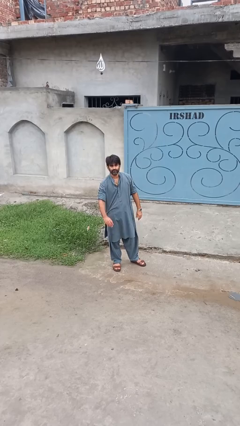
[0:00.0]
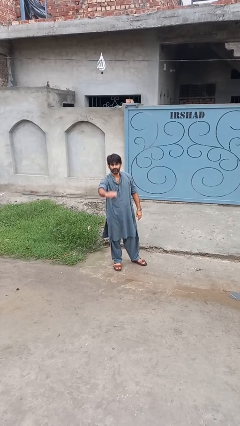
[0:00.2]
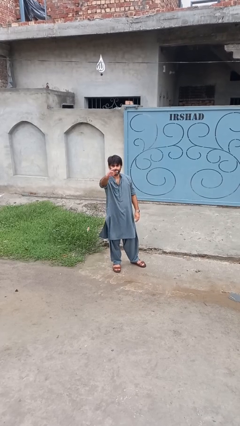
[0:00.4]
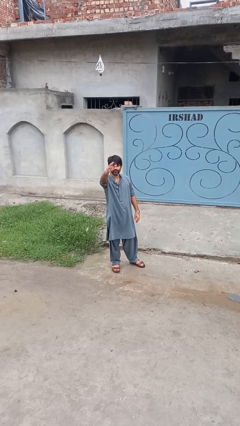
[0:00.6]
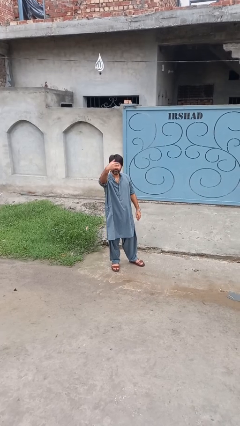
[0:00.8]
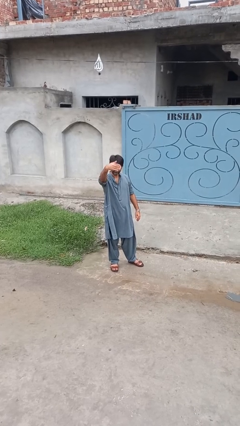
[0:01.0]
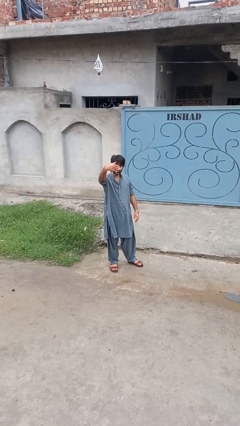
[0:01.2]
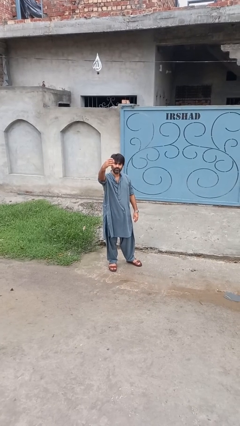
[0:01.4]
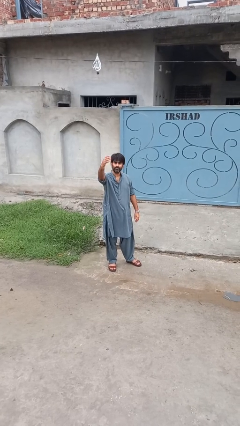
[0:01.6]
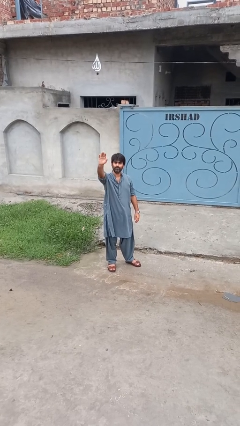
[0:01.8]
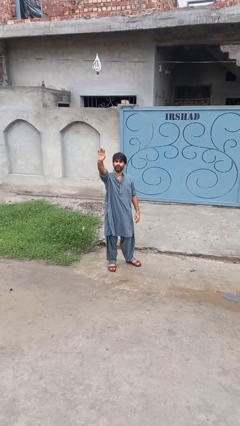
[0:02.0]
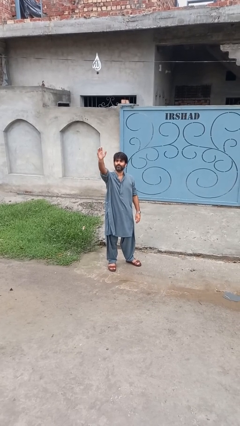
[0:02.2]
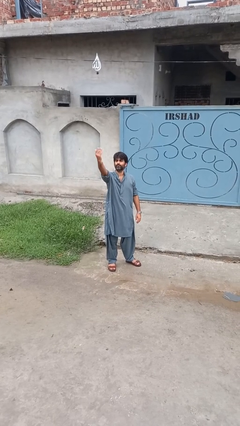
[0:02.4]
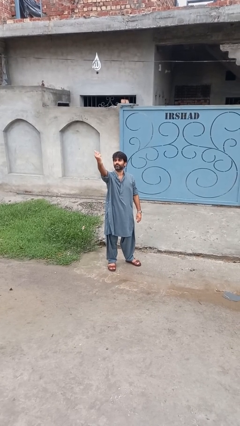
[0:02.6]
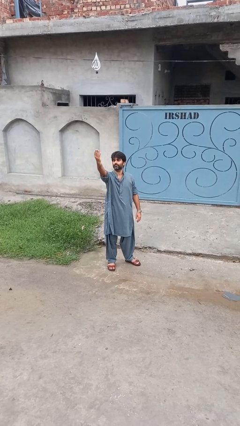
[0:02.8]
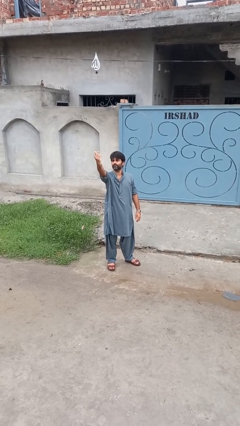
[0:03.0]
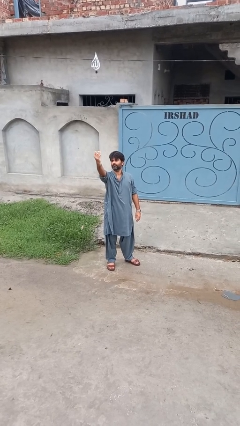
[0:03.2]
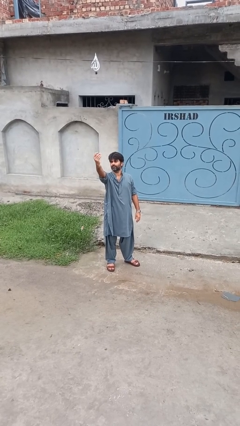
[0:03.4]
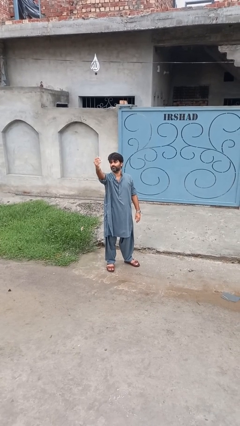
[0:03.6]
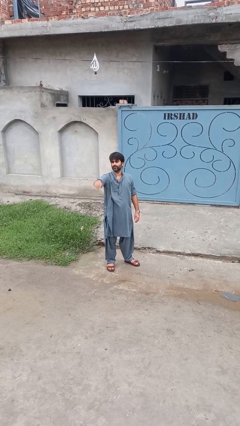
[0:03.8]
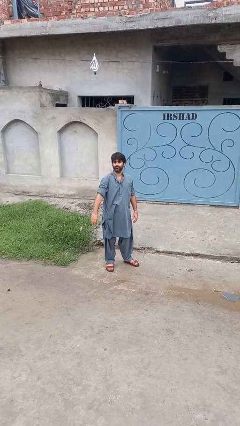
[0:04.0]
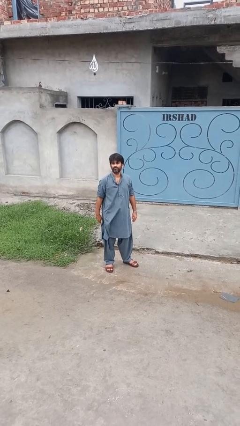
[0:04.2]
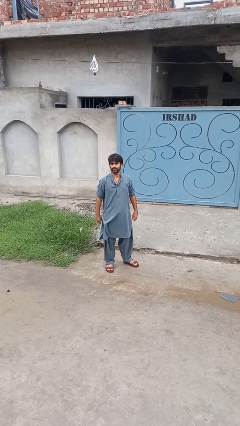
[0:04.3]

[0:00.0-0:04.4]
person gestures come here

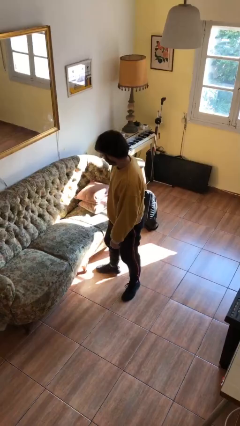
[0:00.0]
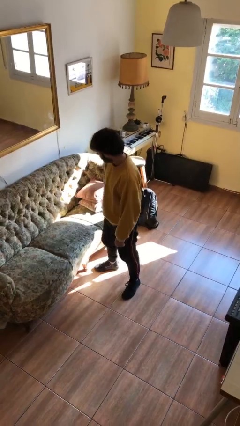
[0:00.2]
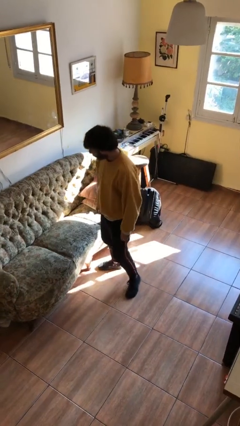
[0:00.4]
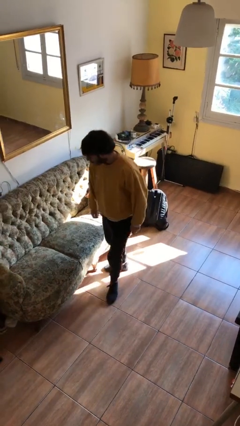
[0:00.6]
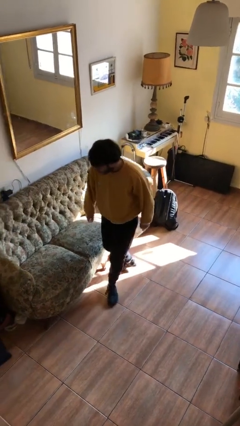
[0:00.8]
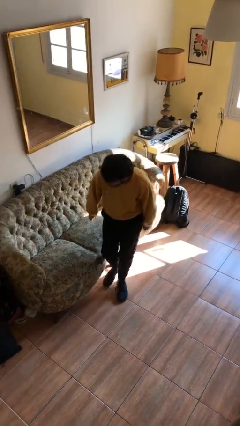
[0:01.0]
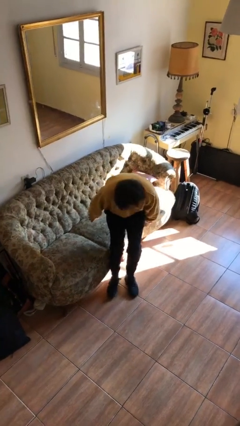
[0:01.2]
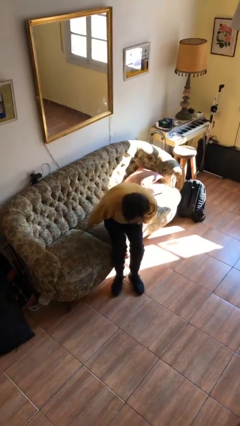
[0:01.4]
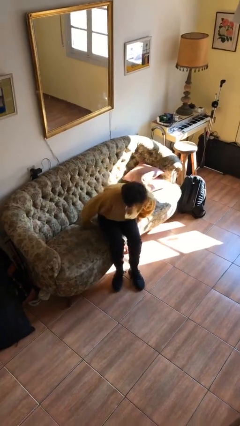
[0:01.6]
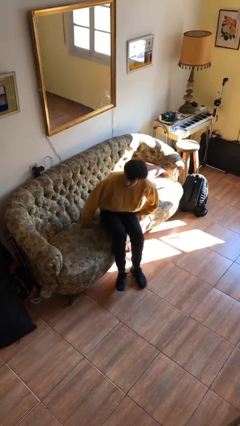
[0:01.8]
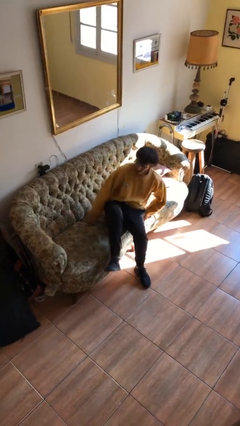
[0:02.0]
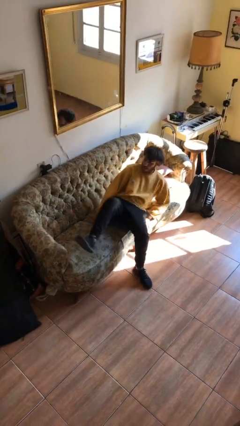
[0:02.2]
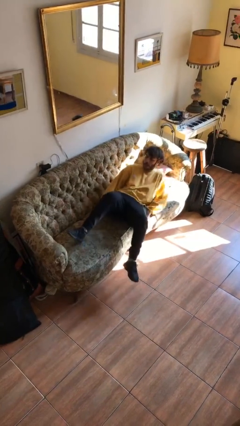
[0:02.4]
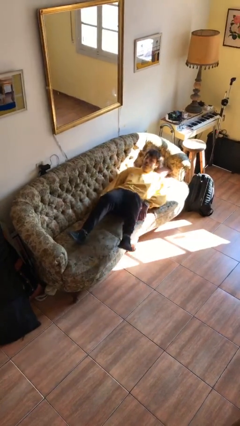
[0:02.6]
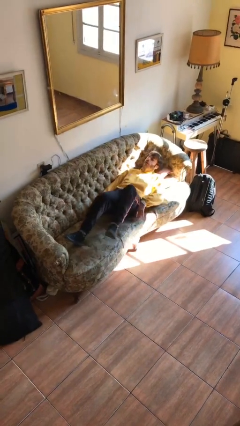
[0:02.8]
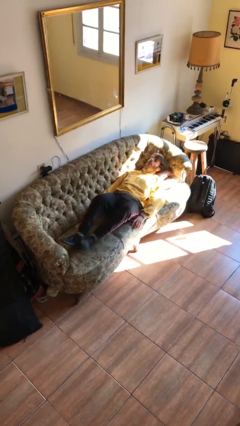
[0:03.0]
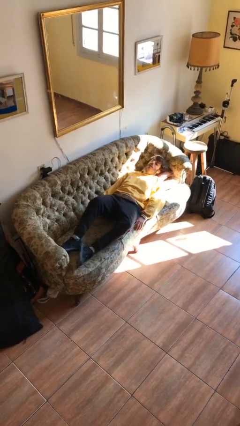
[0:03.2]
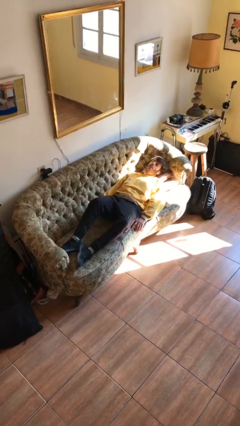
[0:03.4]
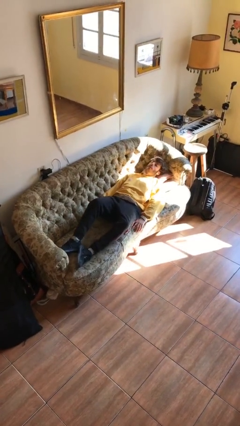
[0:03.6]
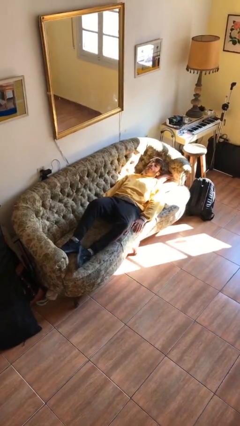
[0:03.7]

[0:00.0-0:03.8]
person lies down on couch

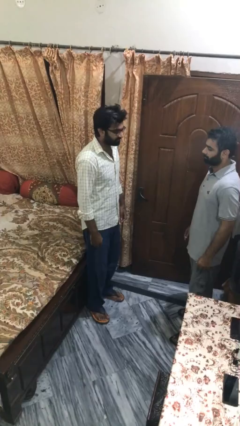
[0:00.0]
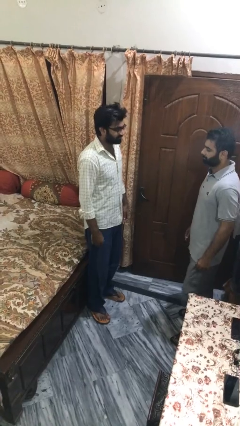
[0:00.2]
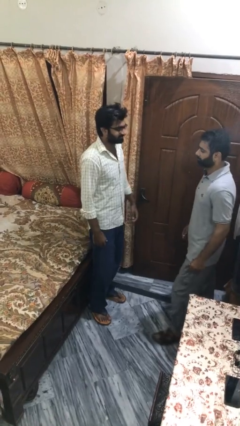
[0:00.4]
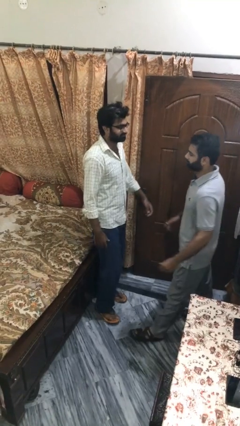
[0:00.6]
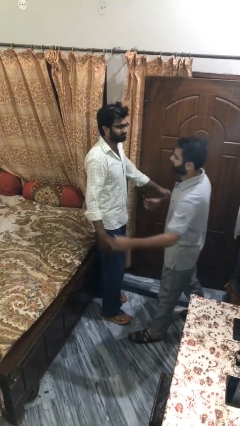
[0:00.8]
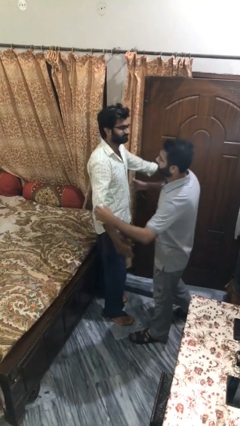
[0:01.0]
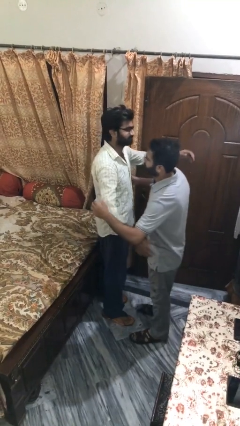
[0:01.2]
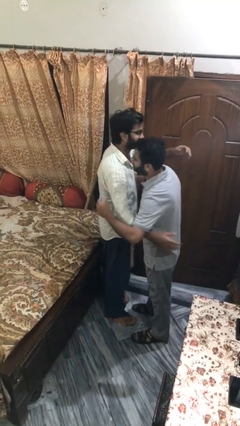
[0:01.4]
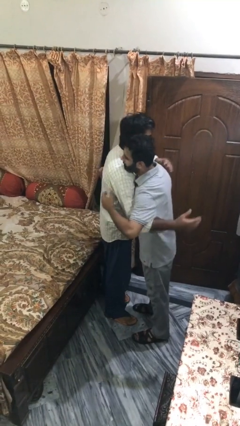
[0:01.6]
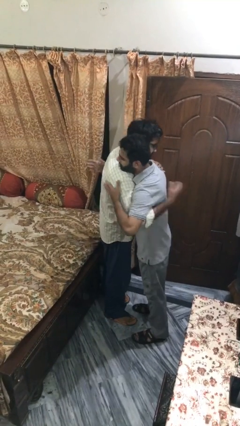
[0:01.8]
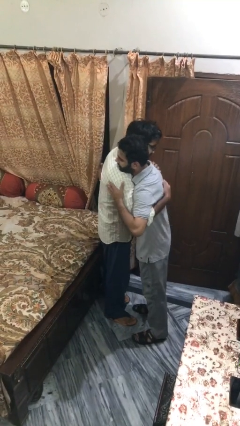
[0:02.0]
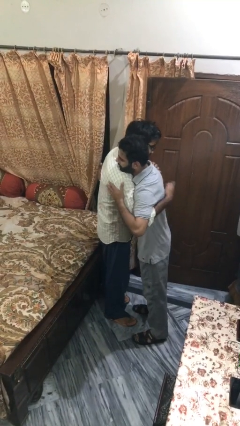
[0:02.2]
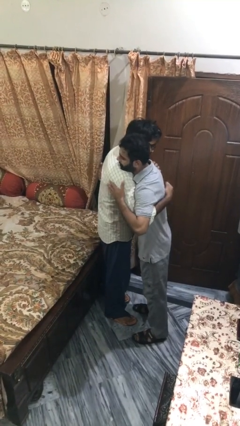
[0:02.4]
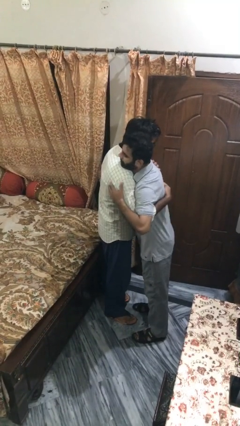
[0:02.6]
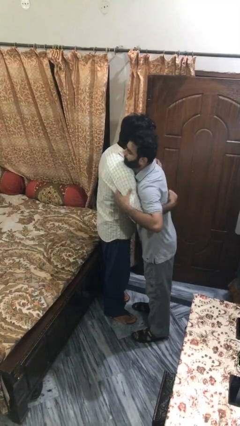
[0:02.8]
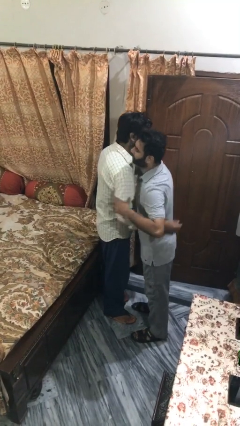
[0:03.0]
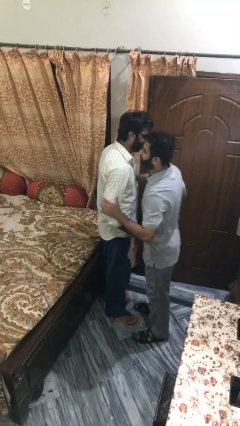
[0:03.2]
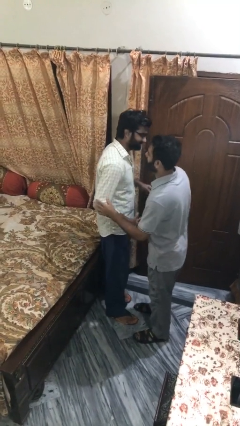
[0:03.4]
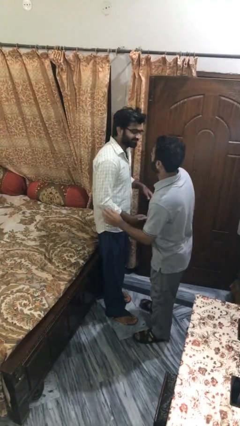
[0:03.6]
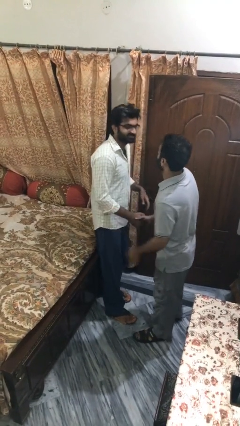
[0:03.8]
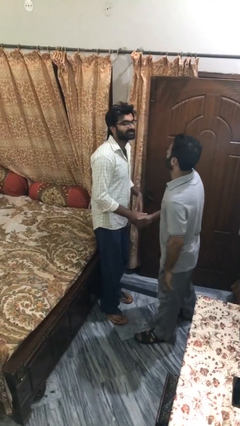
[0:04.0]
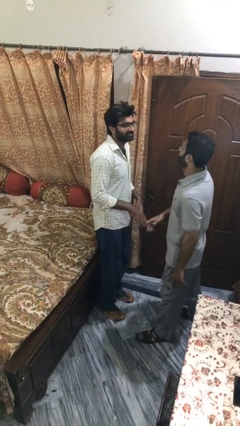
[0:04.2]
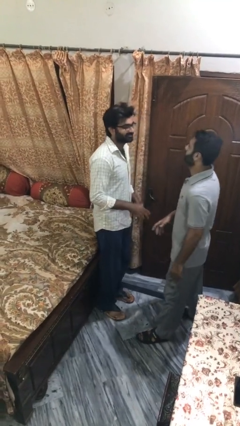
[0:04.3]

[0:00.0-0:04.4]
person embraces person

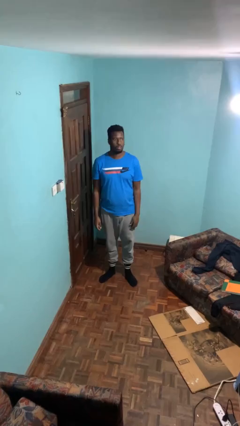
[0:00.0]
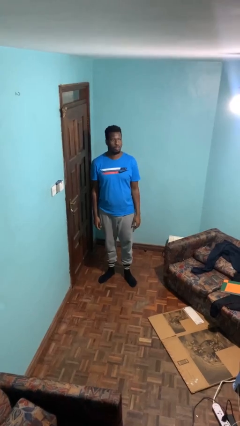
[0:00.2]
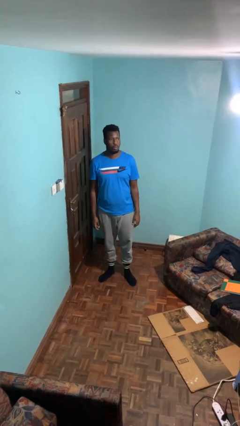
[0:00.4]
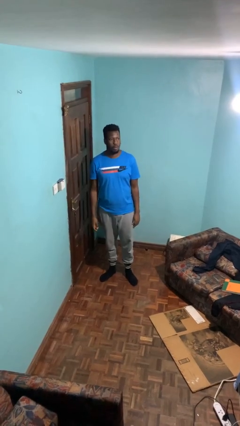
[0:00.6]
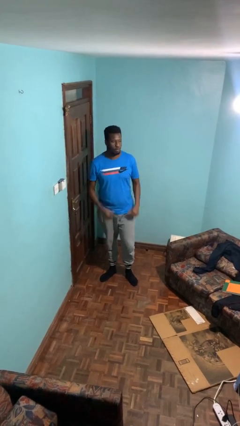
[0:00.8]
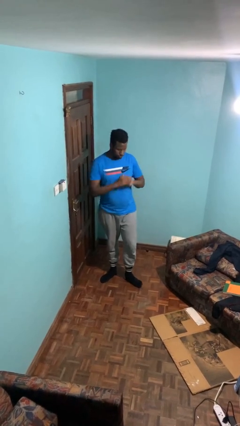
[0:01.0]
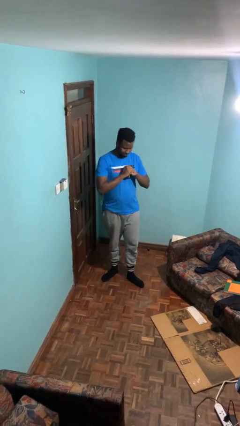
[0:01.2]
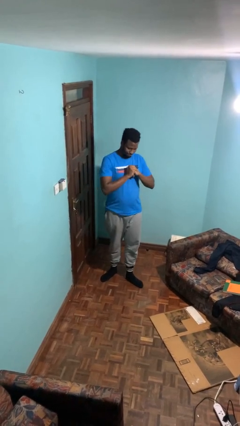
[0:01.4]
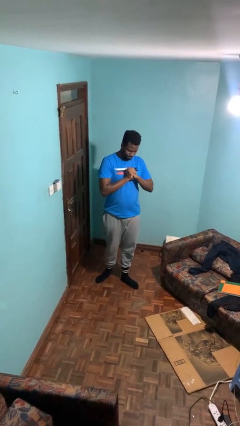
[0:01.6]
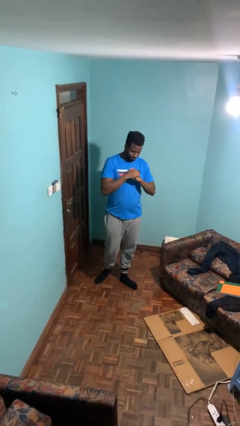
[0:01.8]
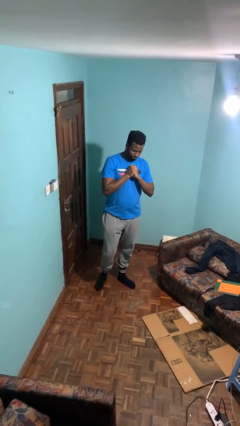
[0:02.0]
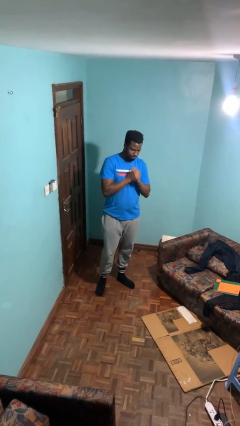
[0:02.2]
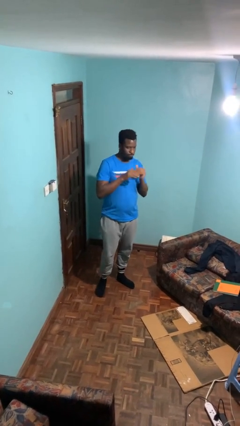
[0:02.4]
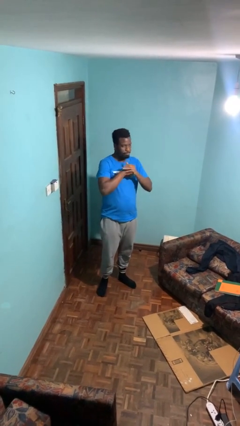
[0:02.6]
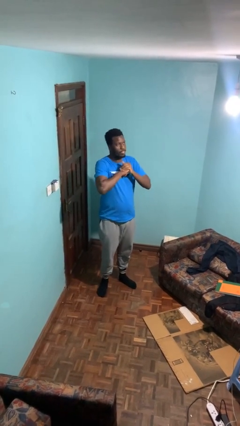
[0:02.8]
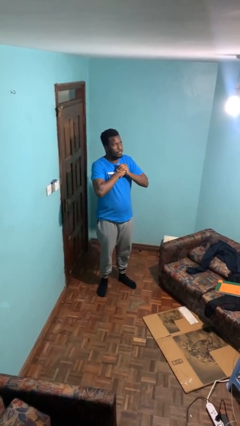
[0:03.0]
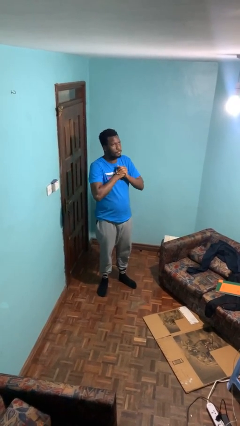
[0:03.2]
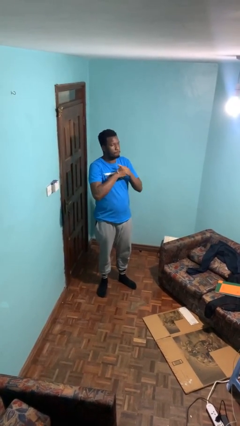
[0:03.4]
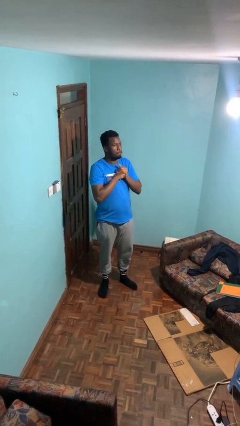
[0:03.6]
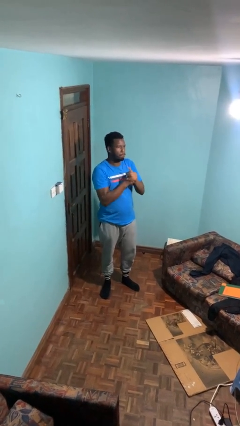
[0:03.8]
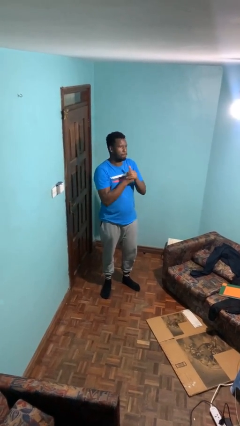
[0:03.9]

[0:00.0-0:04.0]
person cracks knuckles

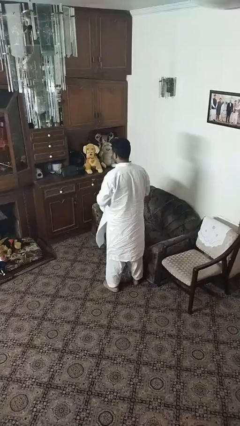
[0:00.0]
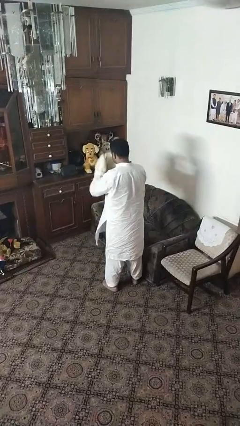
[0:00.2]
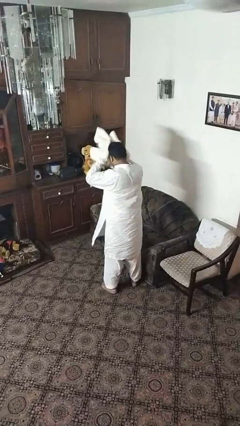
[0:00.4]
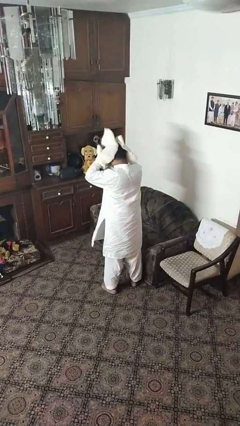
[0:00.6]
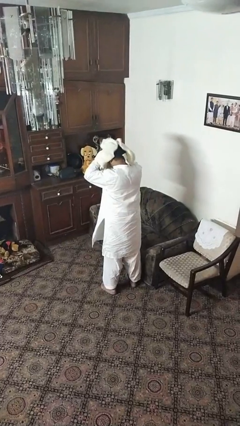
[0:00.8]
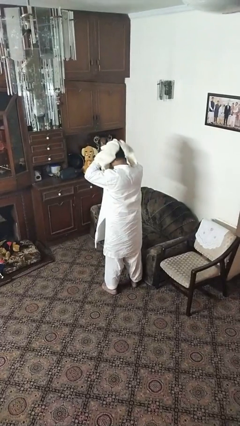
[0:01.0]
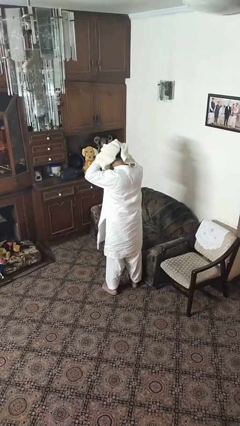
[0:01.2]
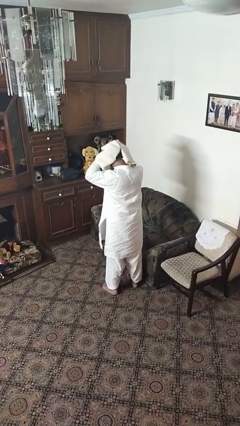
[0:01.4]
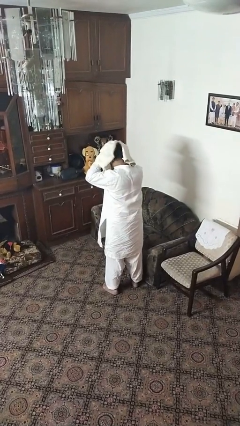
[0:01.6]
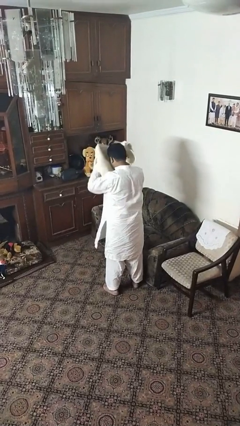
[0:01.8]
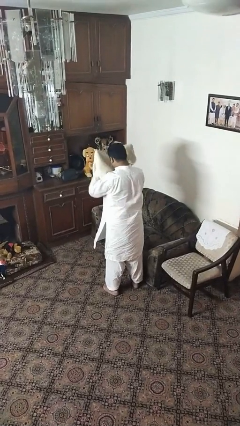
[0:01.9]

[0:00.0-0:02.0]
person dries hair with towel
